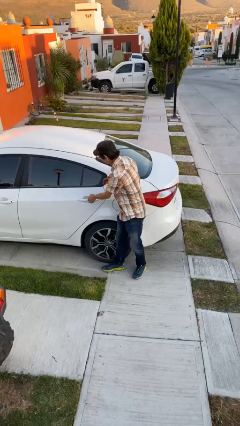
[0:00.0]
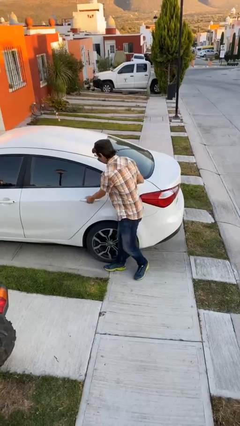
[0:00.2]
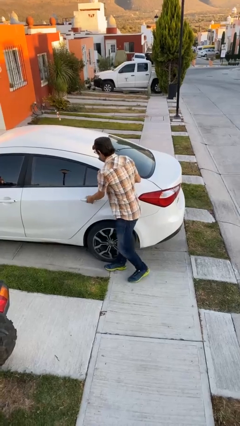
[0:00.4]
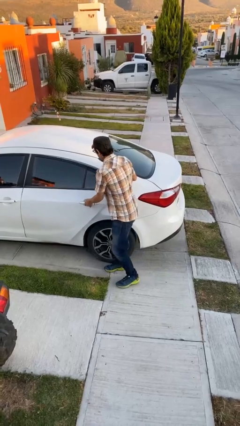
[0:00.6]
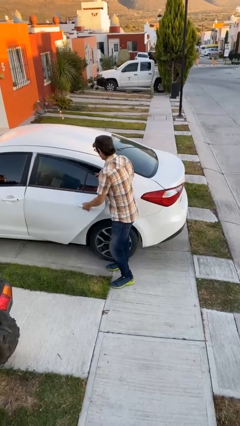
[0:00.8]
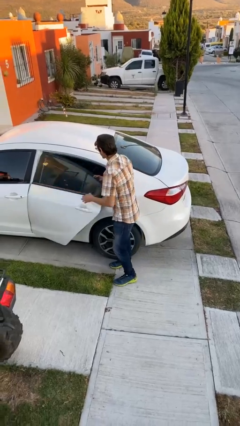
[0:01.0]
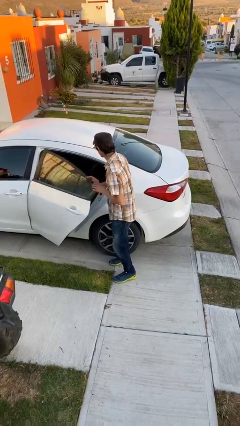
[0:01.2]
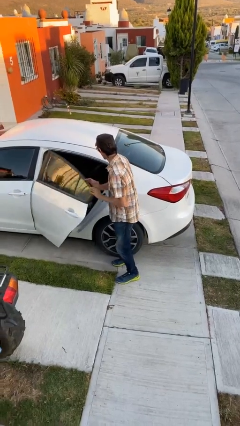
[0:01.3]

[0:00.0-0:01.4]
person opens car door

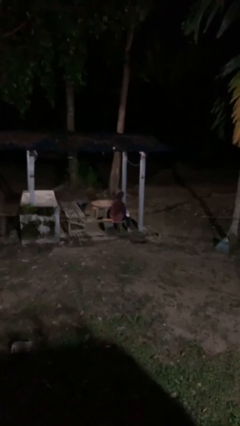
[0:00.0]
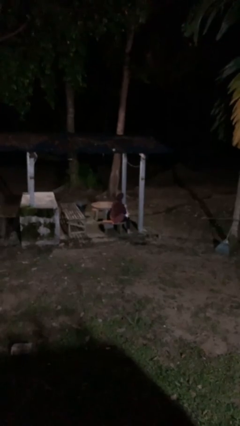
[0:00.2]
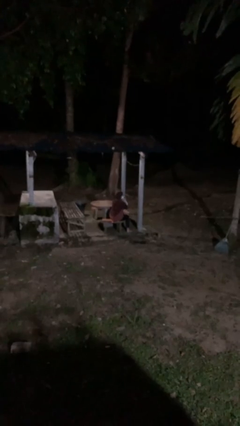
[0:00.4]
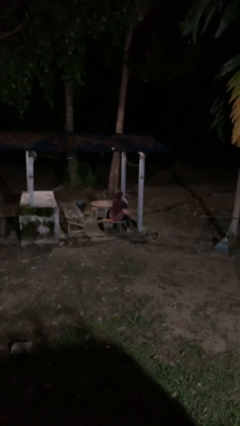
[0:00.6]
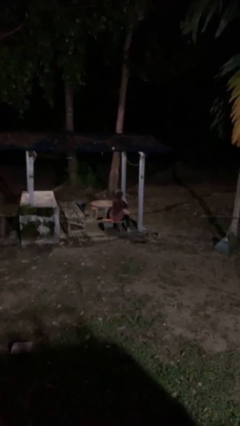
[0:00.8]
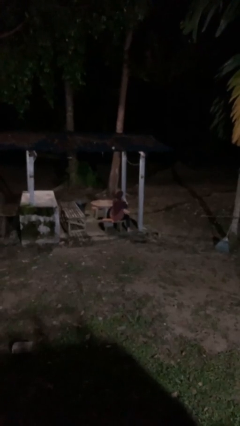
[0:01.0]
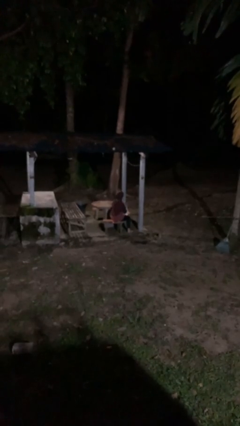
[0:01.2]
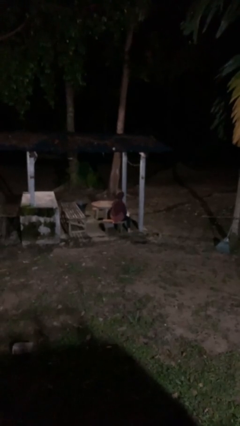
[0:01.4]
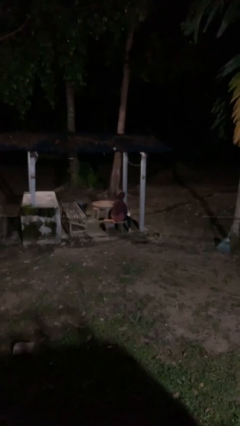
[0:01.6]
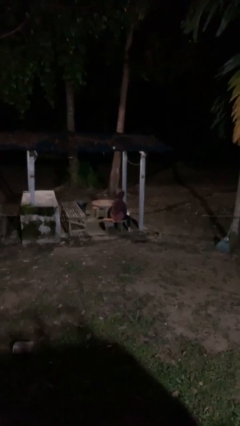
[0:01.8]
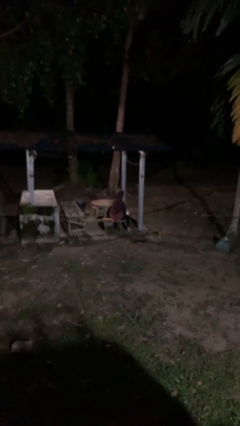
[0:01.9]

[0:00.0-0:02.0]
person blows nose

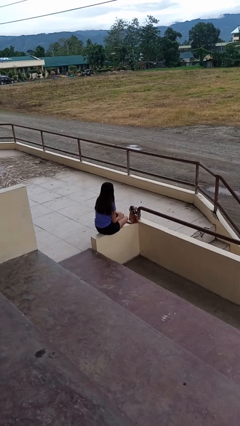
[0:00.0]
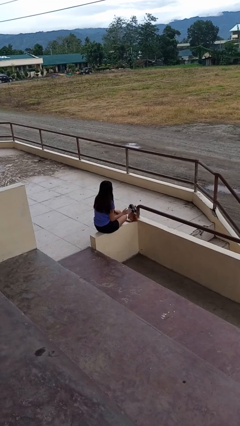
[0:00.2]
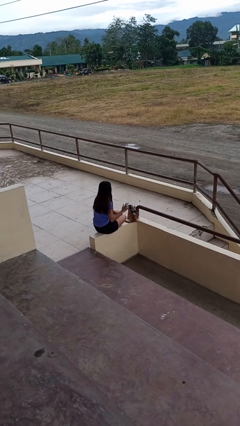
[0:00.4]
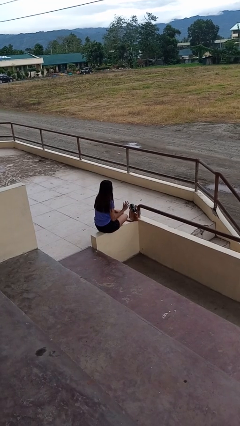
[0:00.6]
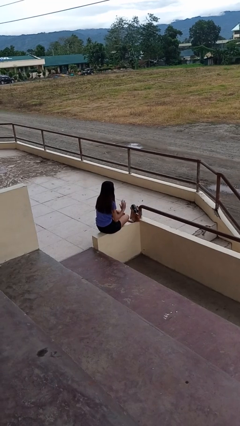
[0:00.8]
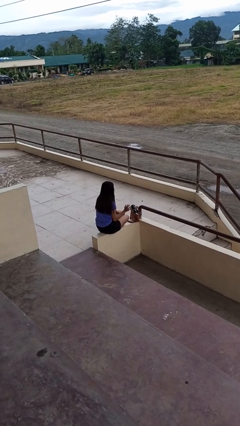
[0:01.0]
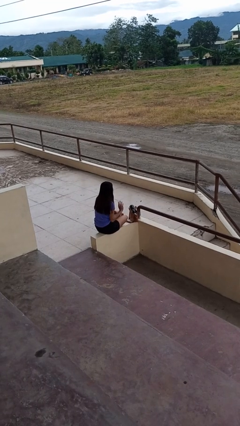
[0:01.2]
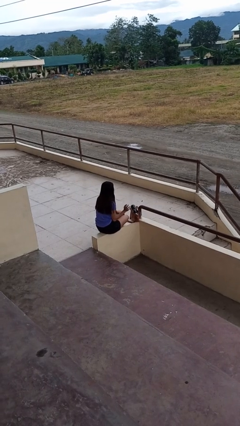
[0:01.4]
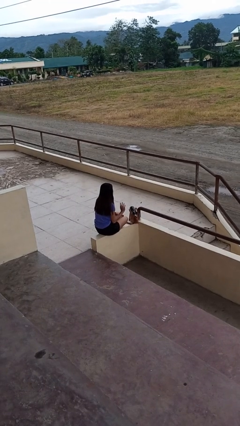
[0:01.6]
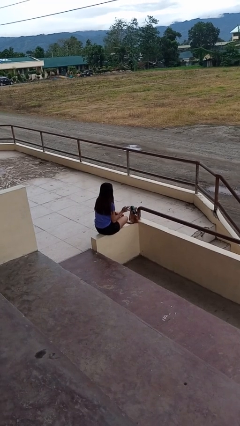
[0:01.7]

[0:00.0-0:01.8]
person waves hand over object

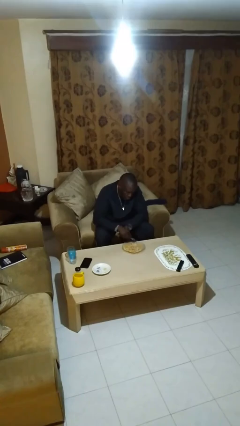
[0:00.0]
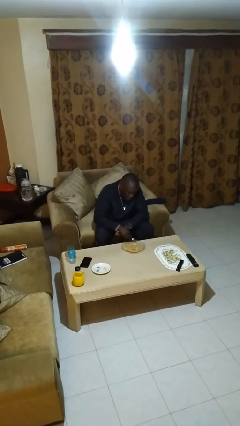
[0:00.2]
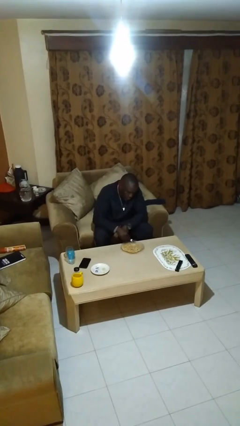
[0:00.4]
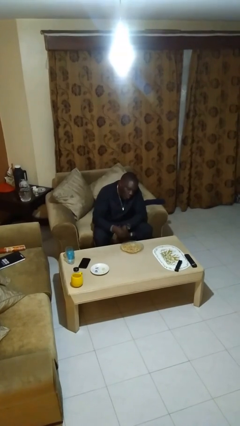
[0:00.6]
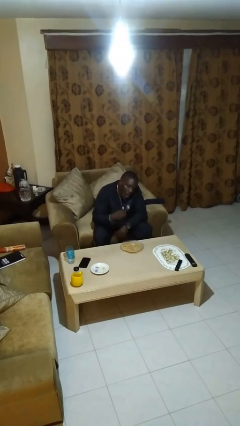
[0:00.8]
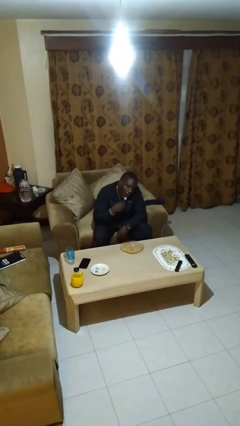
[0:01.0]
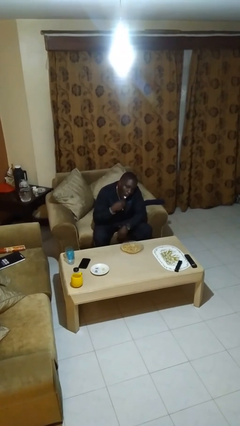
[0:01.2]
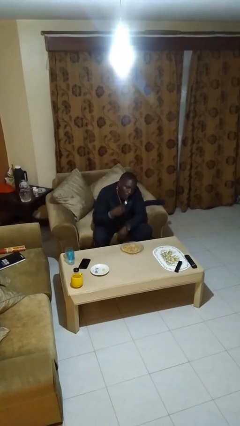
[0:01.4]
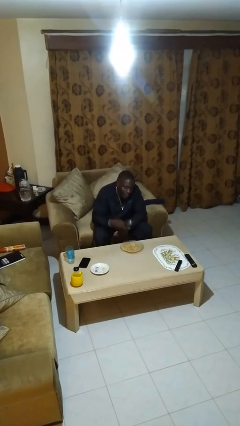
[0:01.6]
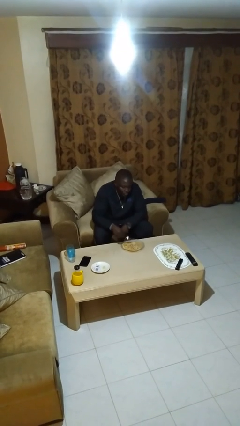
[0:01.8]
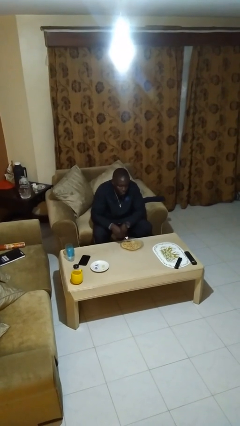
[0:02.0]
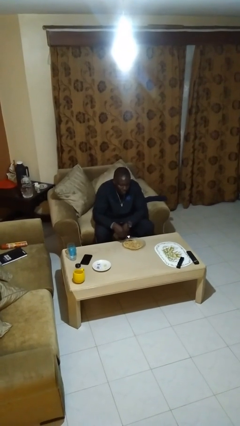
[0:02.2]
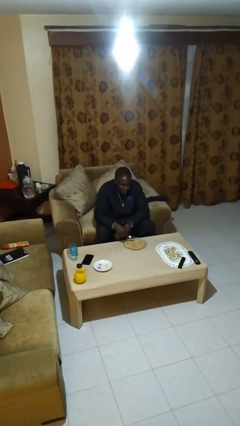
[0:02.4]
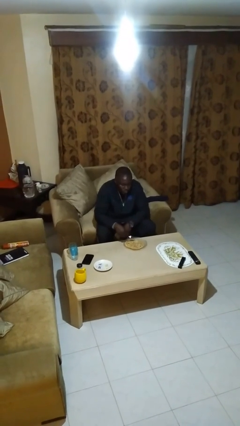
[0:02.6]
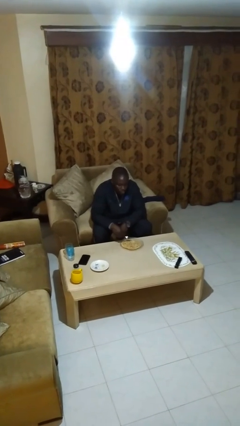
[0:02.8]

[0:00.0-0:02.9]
person eats with utensil

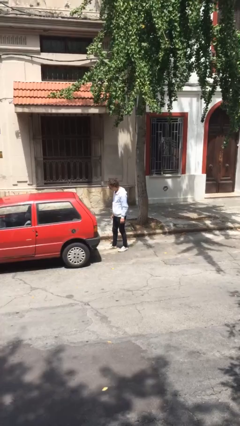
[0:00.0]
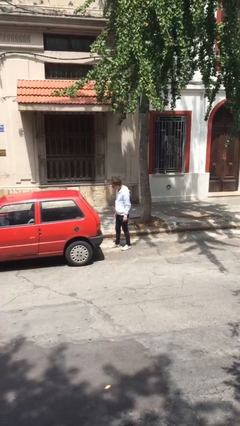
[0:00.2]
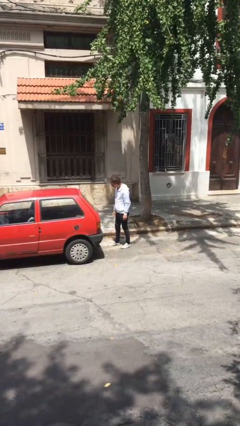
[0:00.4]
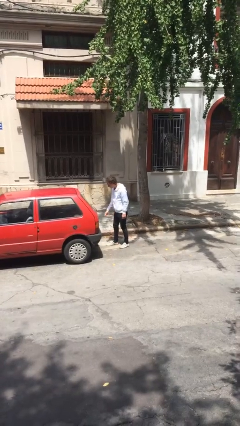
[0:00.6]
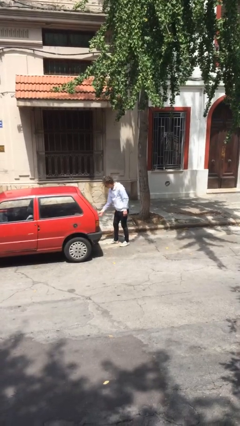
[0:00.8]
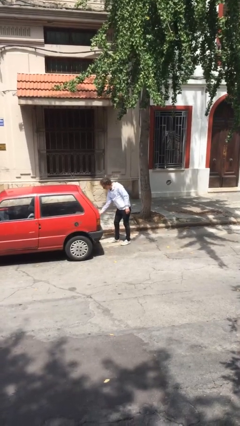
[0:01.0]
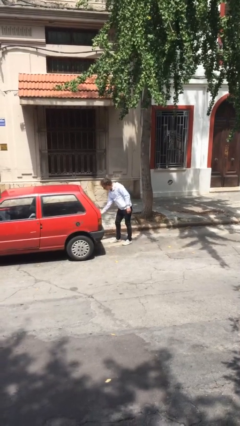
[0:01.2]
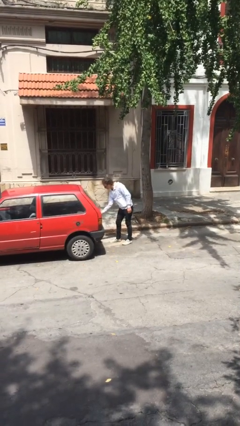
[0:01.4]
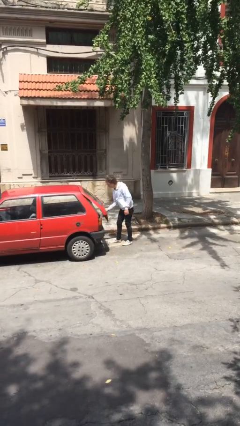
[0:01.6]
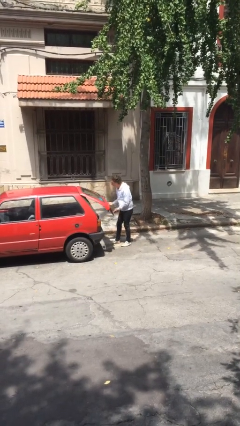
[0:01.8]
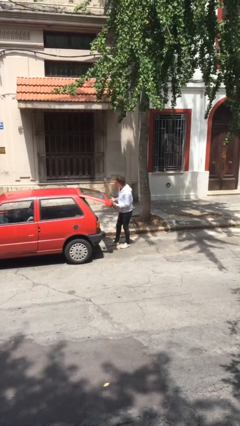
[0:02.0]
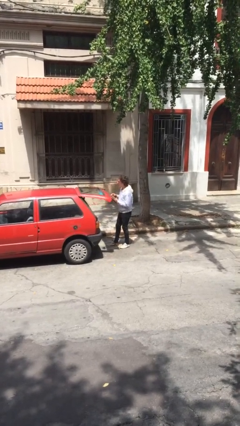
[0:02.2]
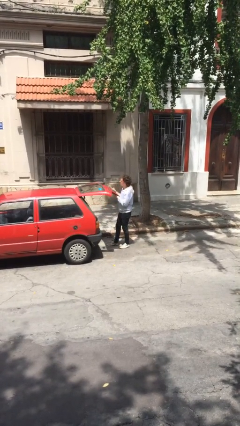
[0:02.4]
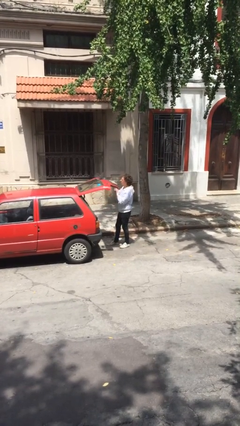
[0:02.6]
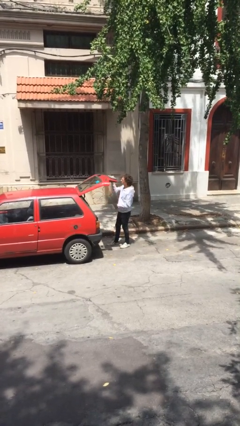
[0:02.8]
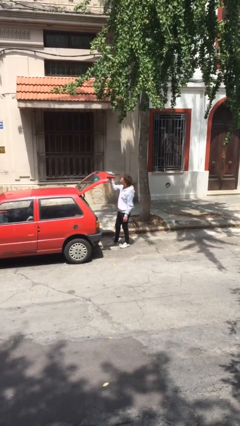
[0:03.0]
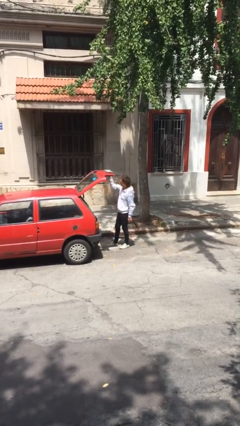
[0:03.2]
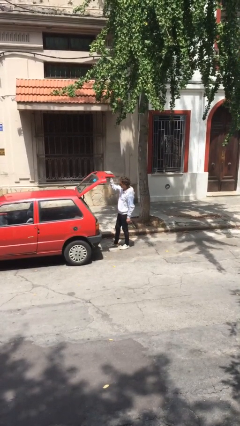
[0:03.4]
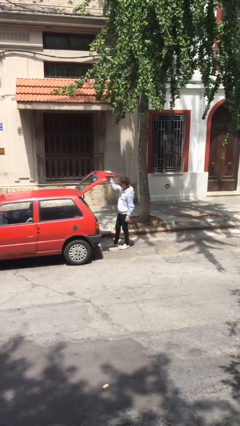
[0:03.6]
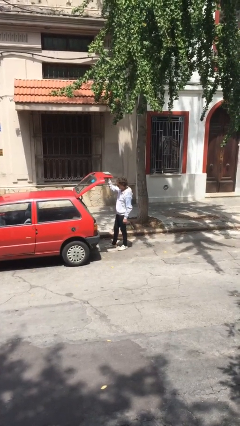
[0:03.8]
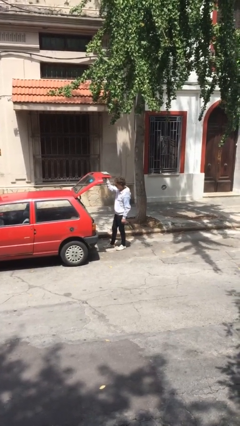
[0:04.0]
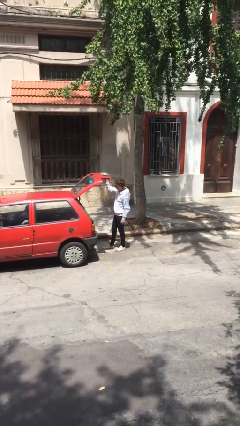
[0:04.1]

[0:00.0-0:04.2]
person opens car trunk

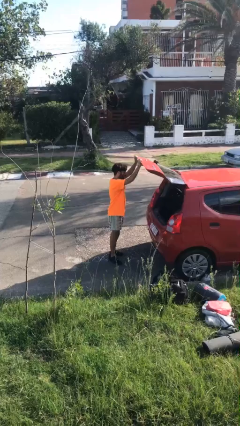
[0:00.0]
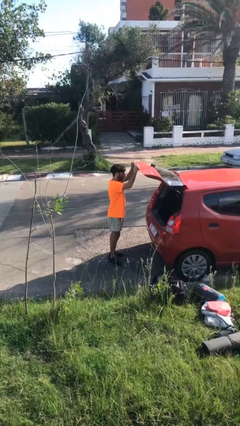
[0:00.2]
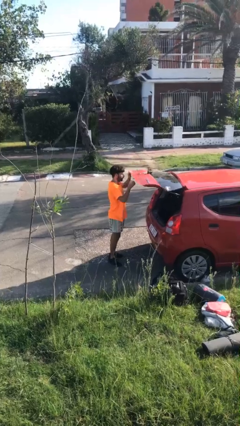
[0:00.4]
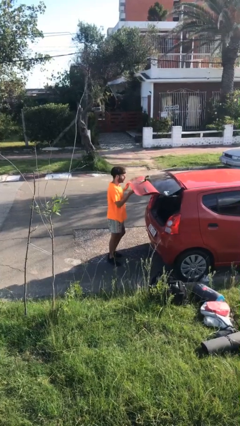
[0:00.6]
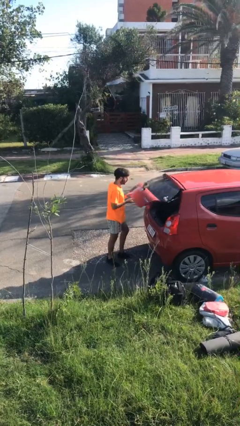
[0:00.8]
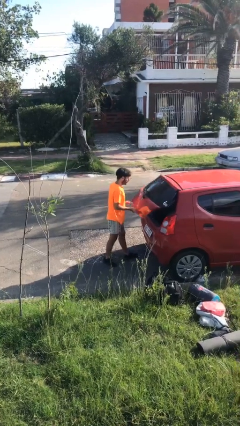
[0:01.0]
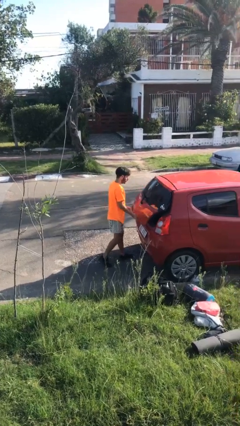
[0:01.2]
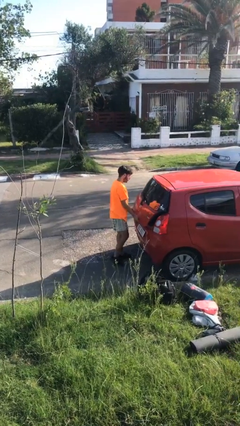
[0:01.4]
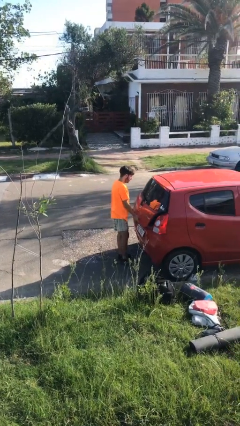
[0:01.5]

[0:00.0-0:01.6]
person closes car trunk

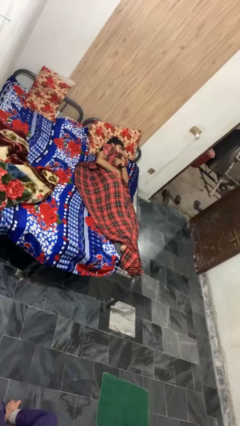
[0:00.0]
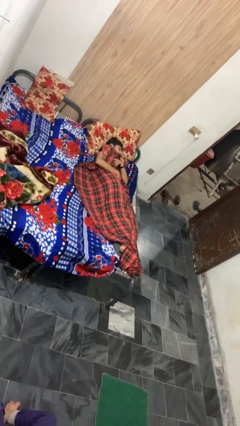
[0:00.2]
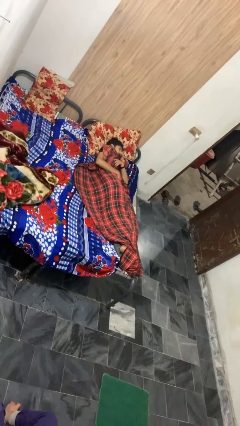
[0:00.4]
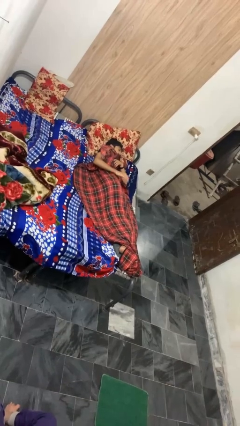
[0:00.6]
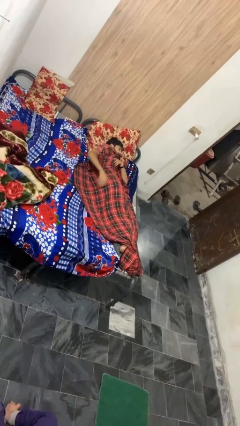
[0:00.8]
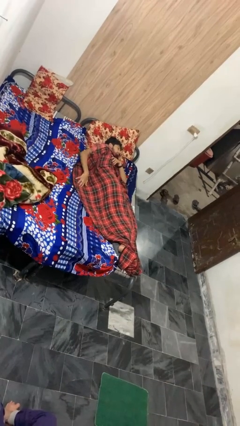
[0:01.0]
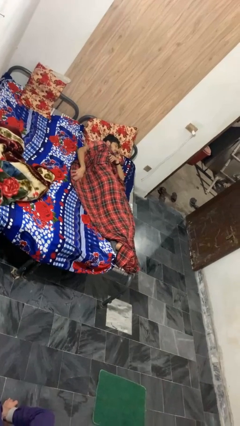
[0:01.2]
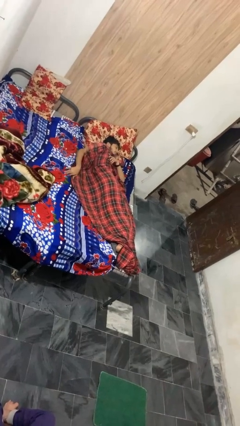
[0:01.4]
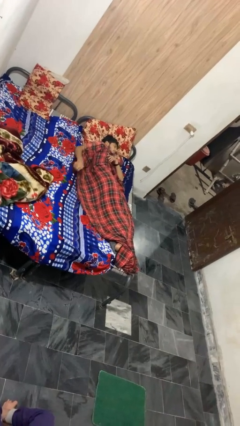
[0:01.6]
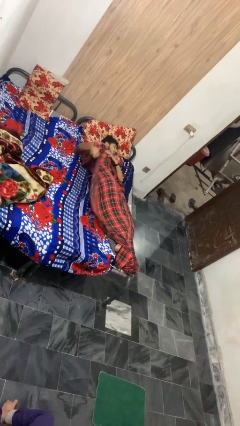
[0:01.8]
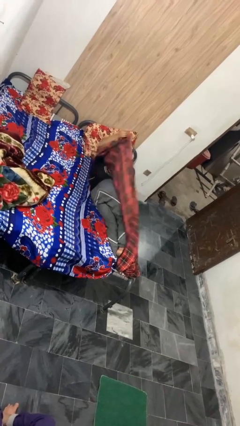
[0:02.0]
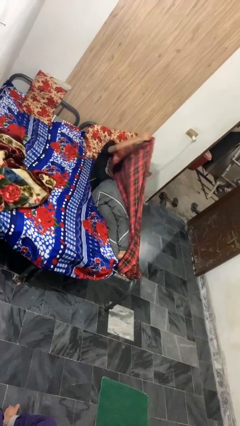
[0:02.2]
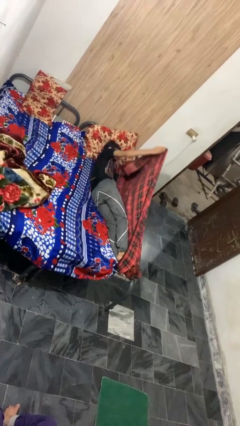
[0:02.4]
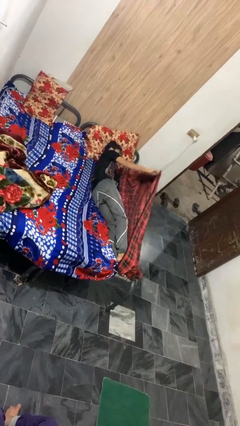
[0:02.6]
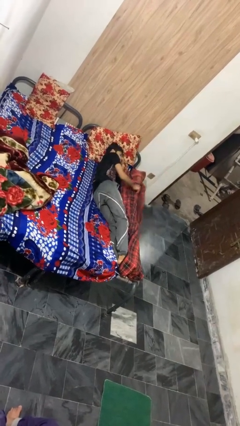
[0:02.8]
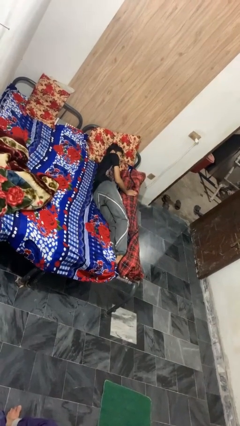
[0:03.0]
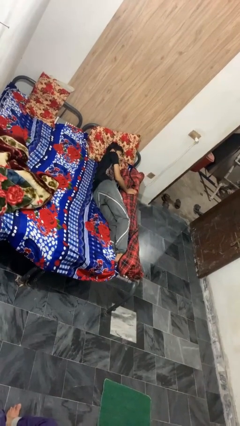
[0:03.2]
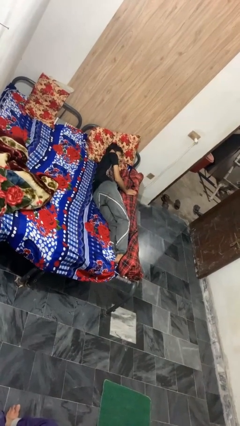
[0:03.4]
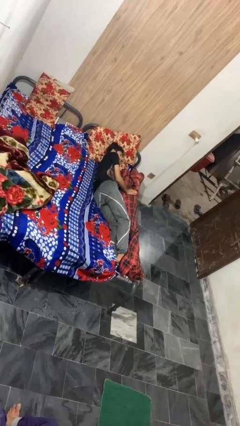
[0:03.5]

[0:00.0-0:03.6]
person uncovers with blanket
